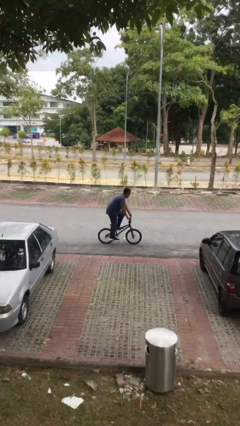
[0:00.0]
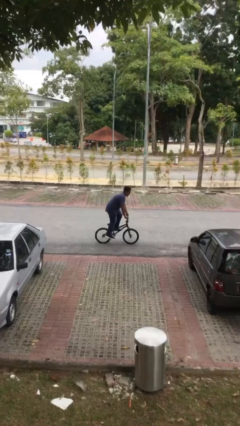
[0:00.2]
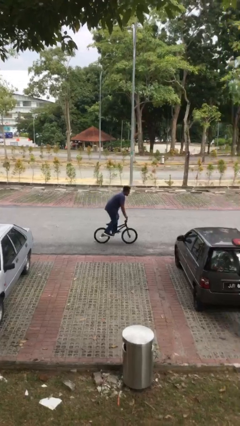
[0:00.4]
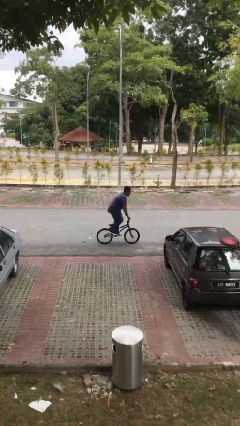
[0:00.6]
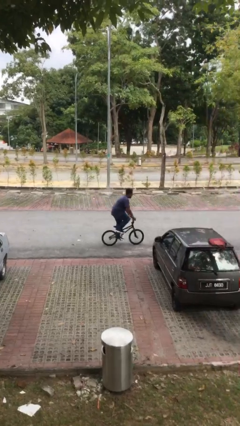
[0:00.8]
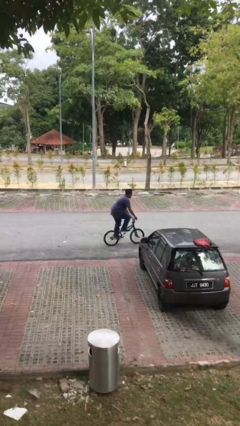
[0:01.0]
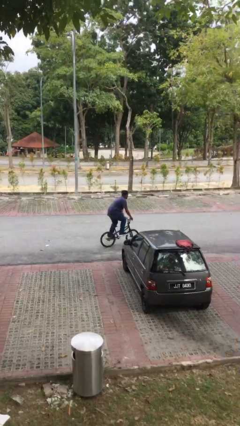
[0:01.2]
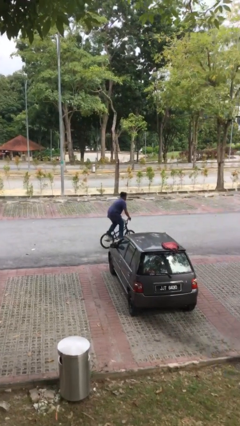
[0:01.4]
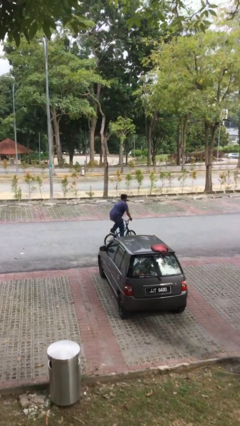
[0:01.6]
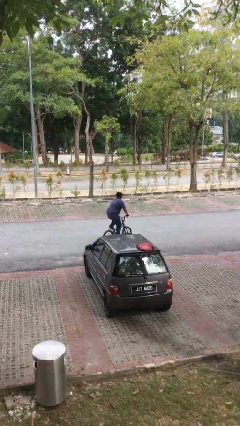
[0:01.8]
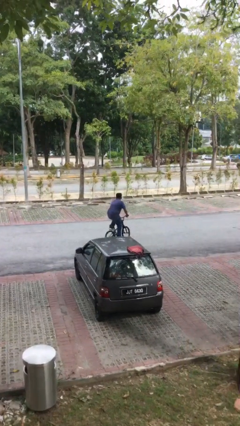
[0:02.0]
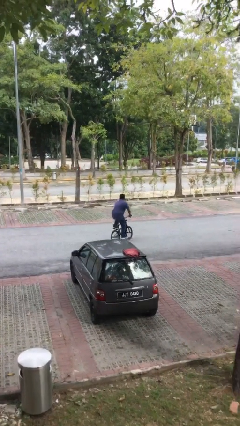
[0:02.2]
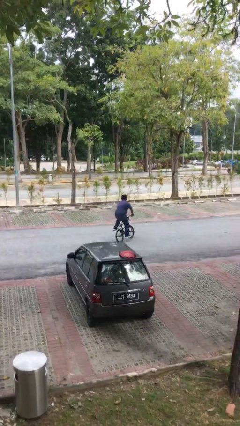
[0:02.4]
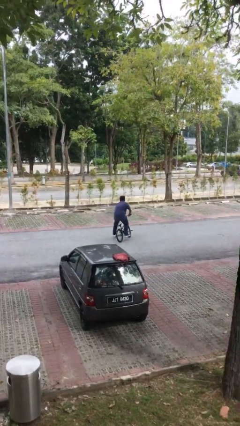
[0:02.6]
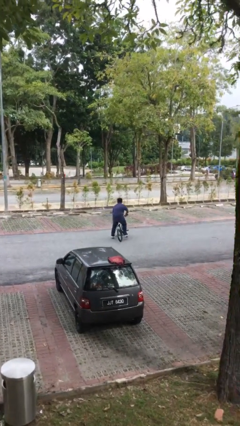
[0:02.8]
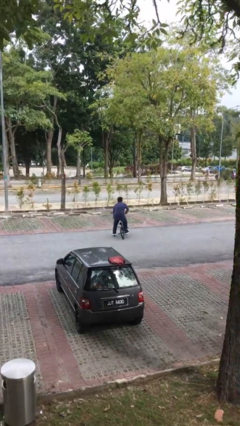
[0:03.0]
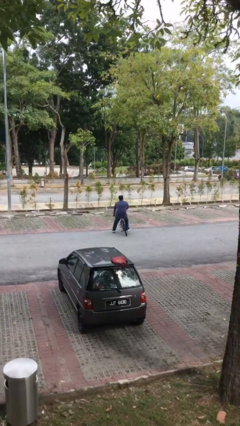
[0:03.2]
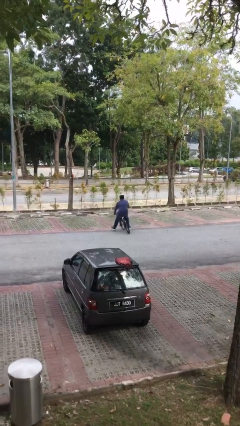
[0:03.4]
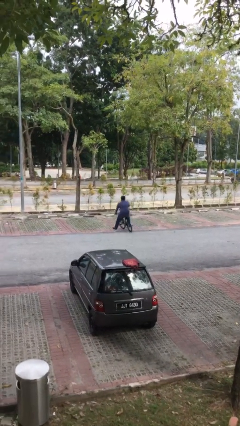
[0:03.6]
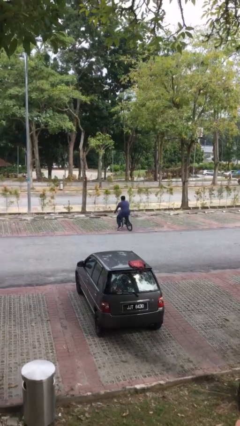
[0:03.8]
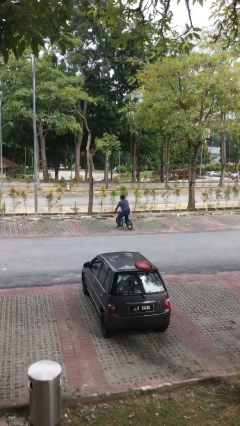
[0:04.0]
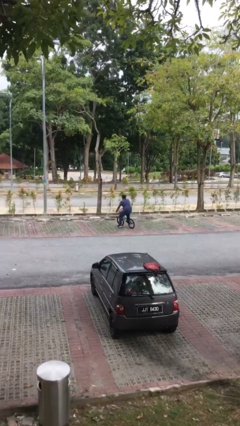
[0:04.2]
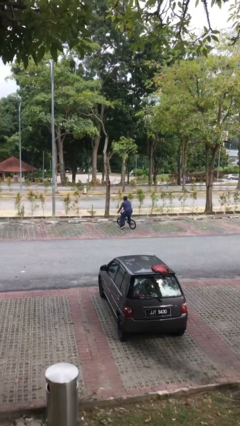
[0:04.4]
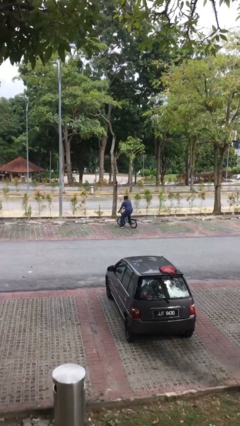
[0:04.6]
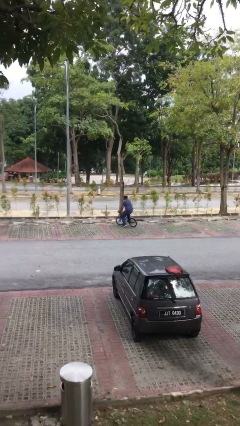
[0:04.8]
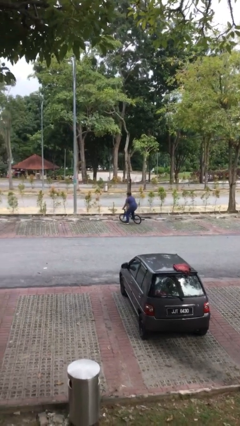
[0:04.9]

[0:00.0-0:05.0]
person rides bicycle

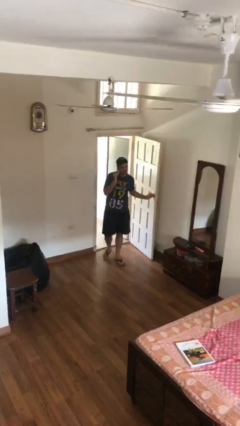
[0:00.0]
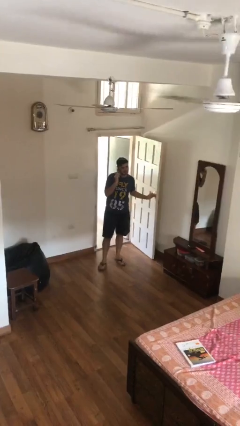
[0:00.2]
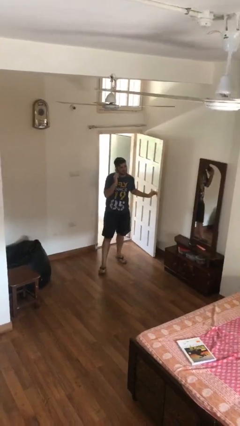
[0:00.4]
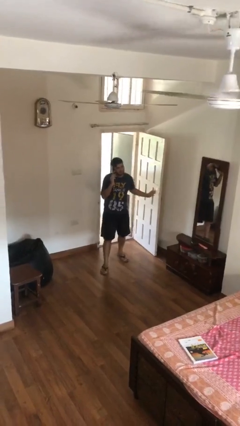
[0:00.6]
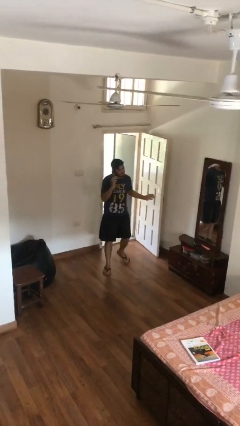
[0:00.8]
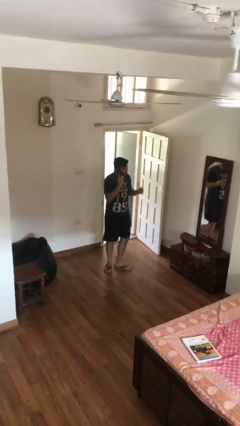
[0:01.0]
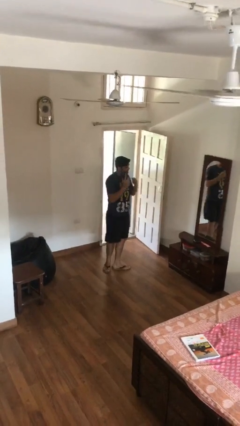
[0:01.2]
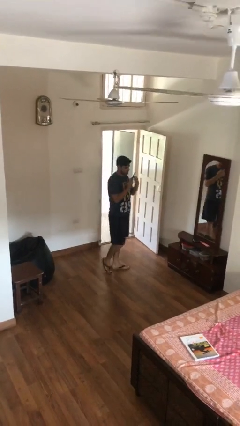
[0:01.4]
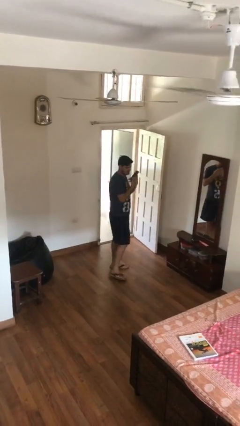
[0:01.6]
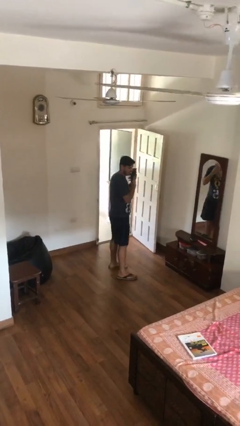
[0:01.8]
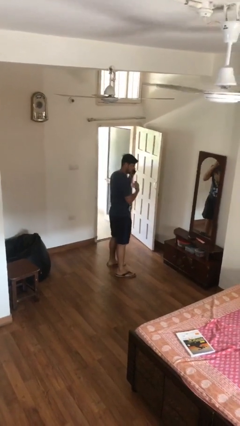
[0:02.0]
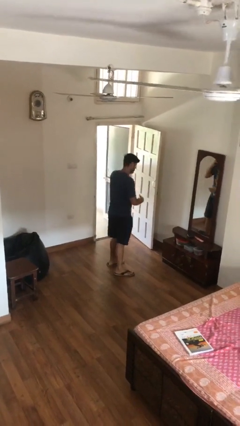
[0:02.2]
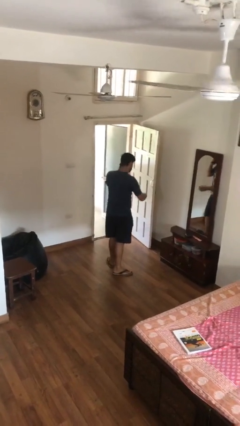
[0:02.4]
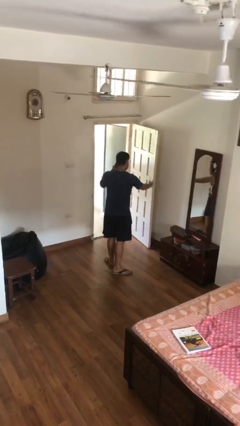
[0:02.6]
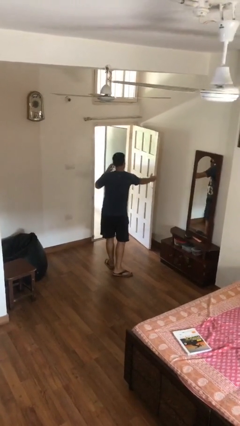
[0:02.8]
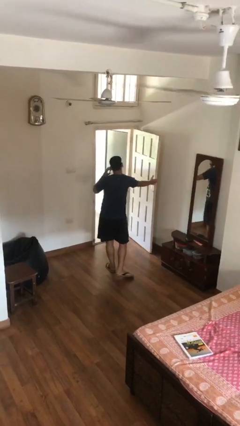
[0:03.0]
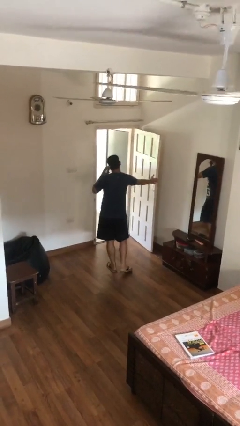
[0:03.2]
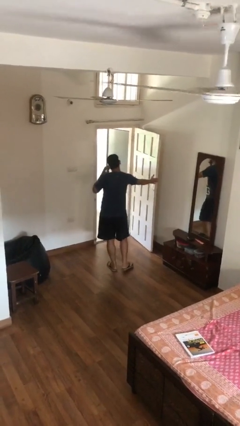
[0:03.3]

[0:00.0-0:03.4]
person enters scene through structure

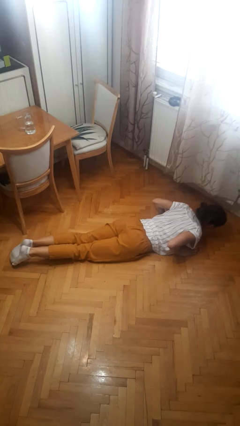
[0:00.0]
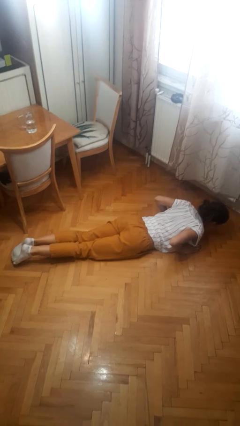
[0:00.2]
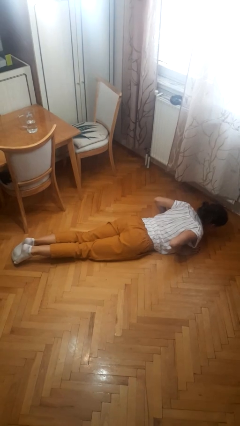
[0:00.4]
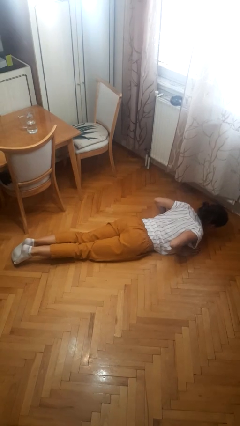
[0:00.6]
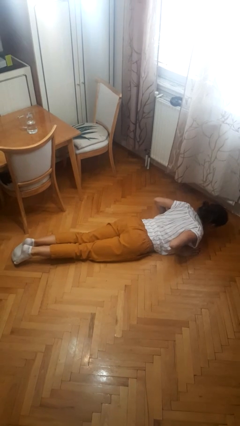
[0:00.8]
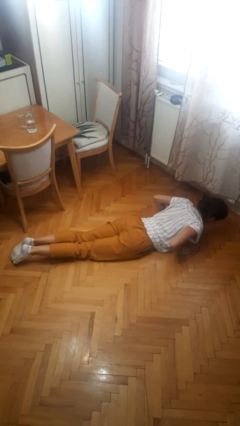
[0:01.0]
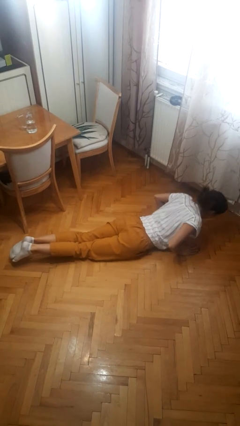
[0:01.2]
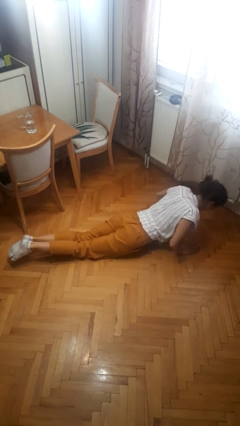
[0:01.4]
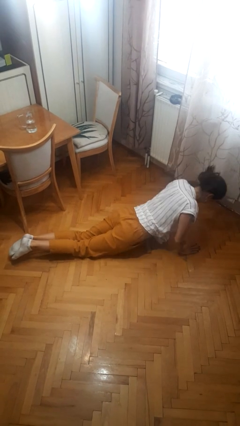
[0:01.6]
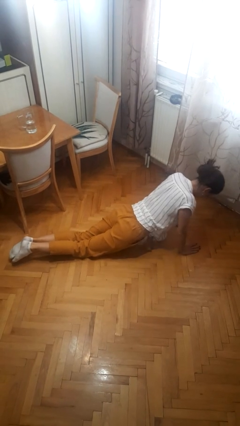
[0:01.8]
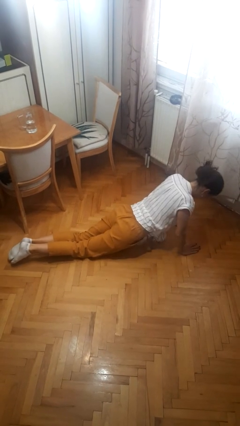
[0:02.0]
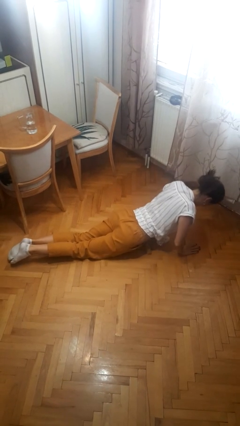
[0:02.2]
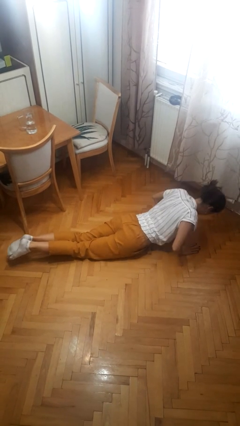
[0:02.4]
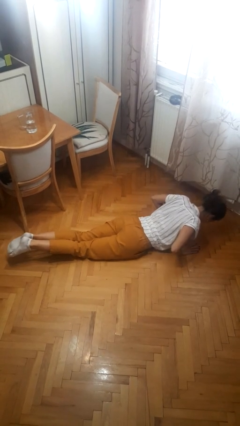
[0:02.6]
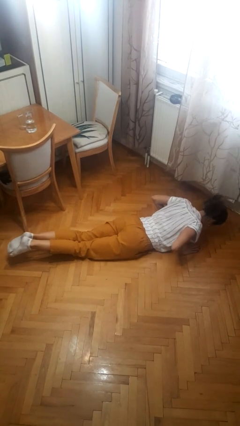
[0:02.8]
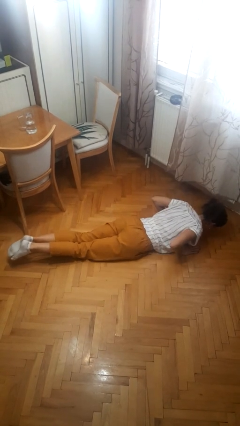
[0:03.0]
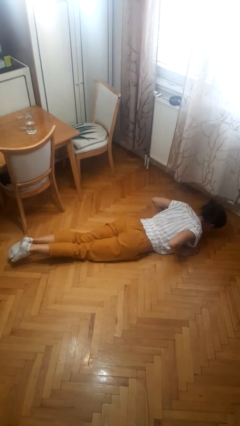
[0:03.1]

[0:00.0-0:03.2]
person exercises with pushup

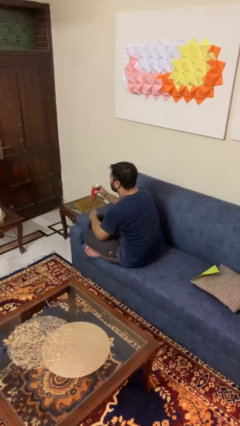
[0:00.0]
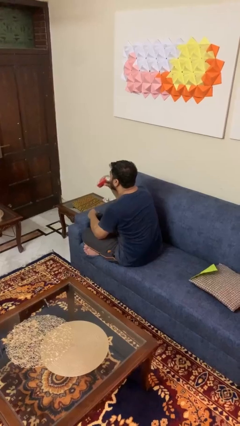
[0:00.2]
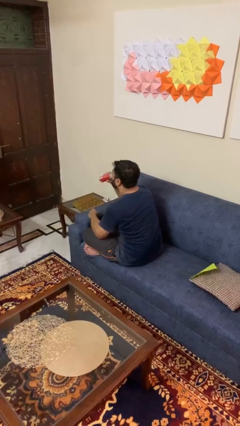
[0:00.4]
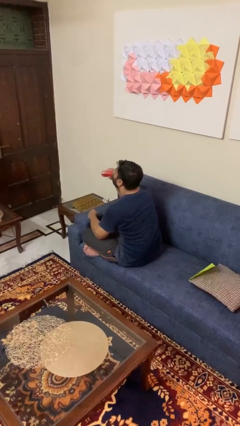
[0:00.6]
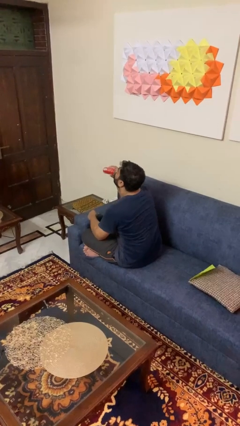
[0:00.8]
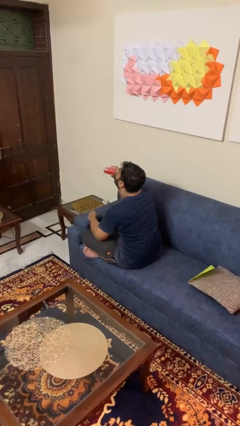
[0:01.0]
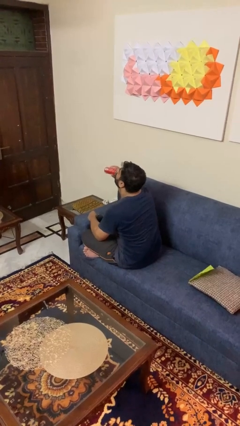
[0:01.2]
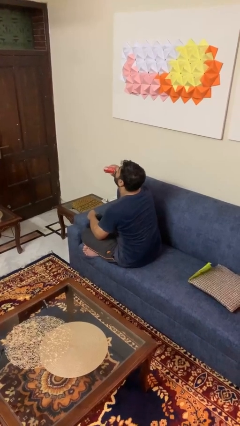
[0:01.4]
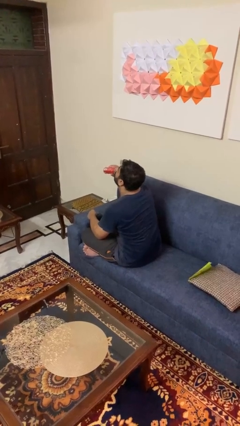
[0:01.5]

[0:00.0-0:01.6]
person drinks from beverage can

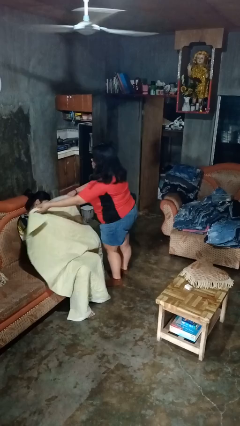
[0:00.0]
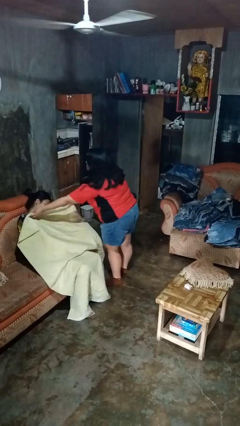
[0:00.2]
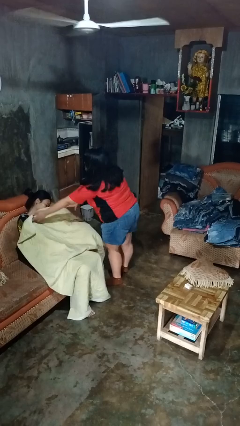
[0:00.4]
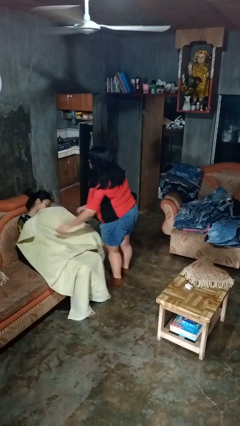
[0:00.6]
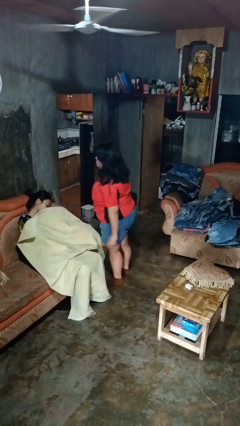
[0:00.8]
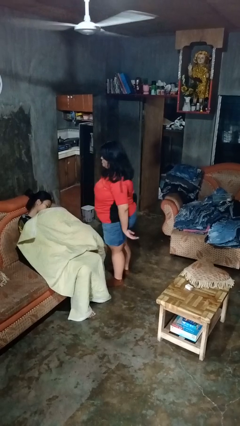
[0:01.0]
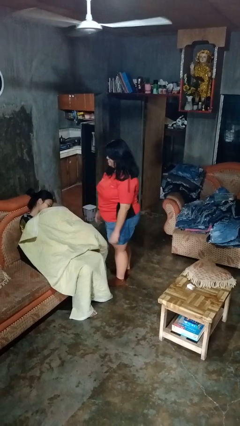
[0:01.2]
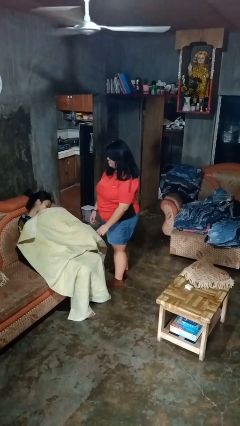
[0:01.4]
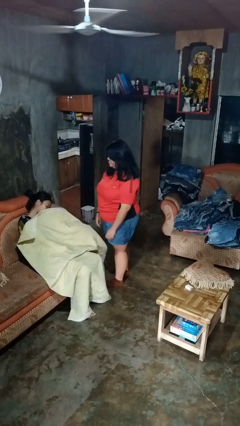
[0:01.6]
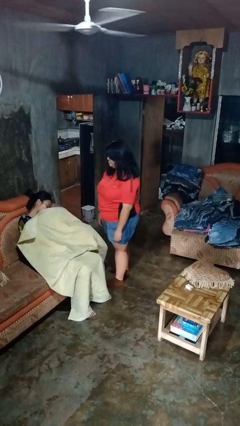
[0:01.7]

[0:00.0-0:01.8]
person covers friend with blanket

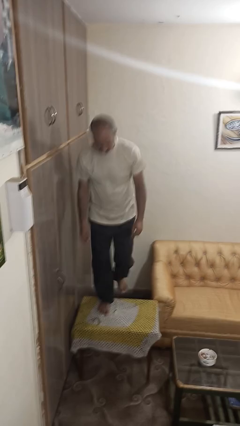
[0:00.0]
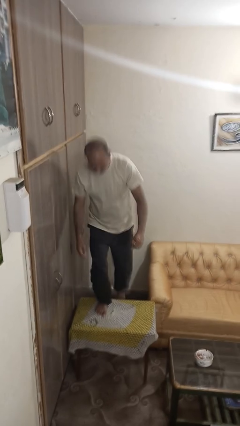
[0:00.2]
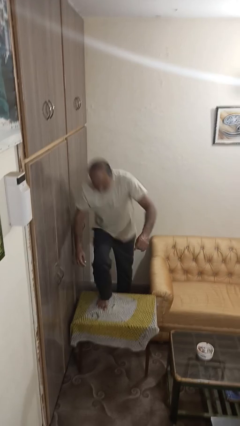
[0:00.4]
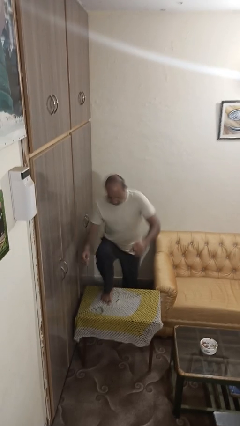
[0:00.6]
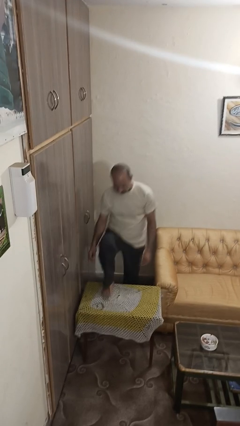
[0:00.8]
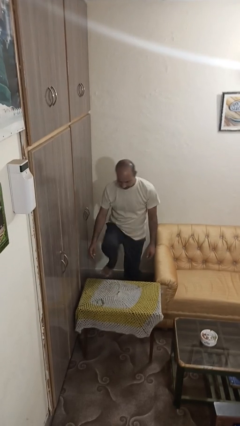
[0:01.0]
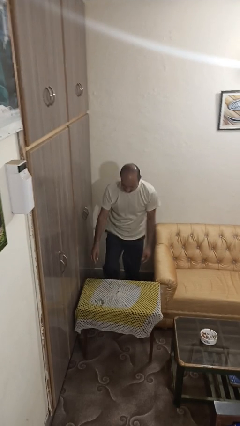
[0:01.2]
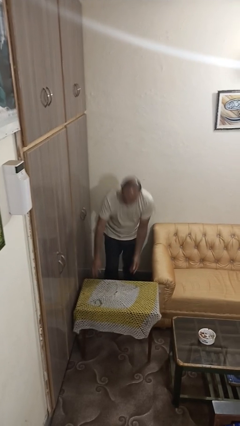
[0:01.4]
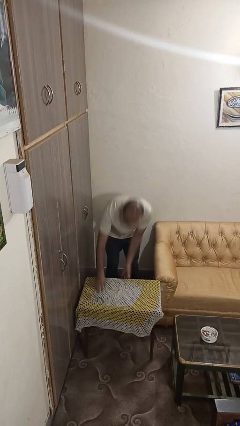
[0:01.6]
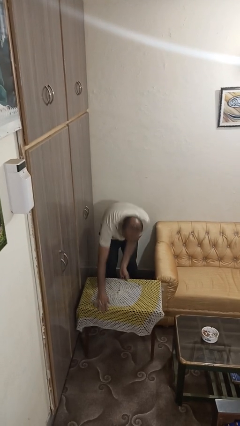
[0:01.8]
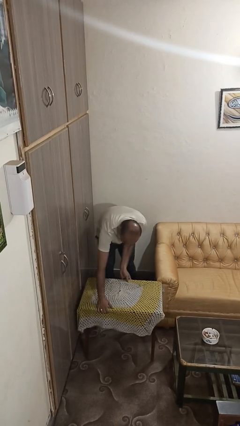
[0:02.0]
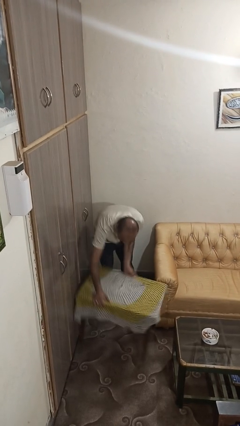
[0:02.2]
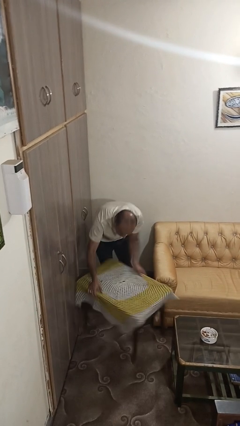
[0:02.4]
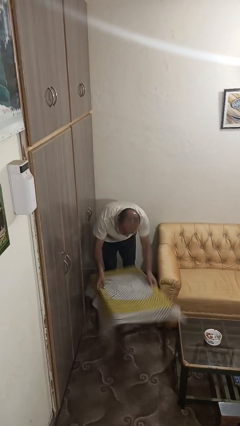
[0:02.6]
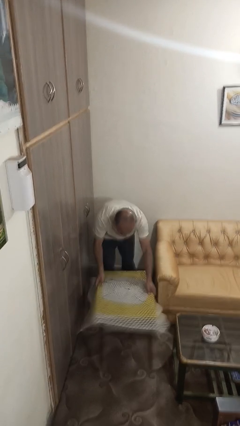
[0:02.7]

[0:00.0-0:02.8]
person climbs off table
